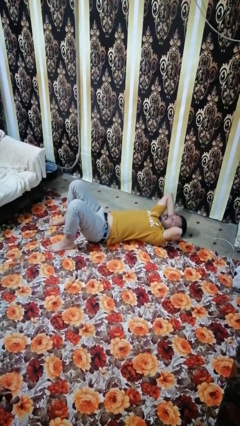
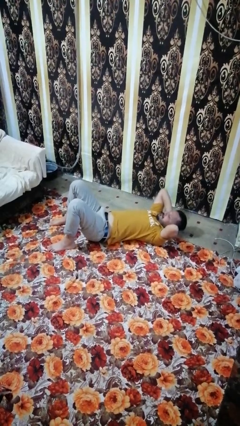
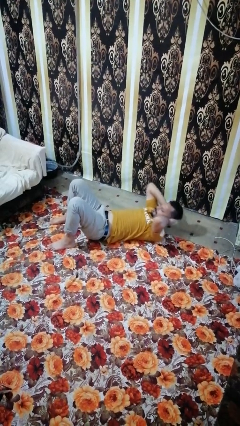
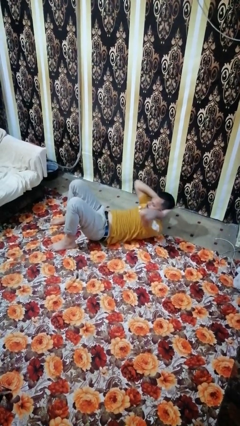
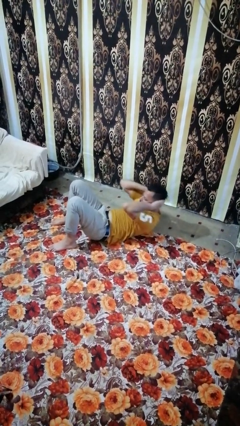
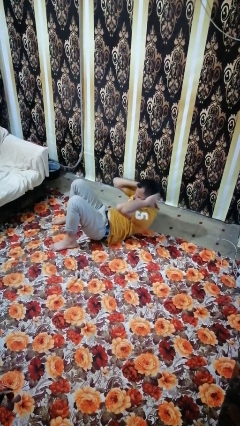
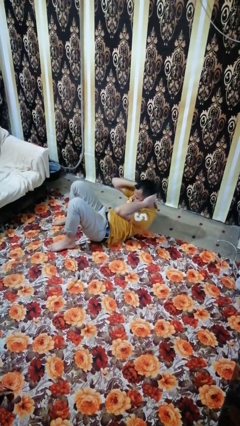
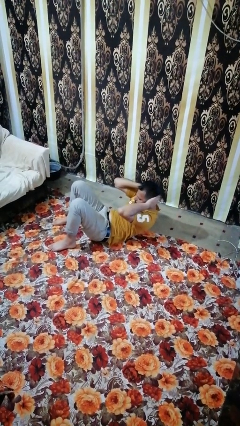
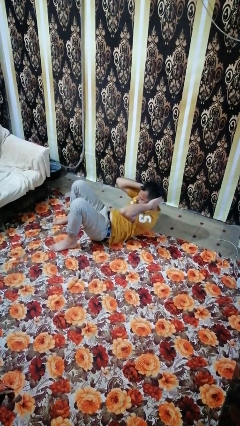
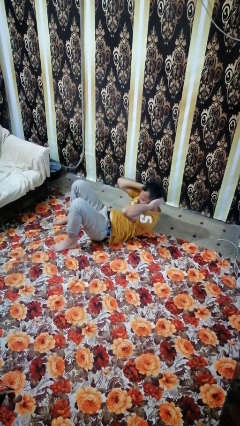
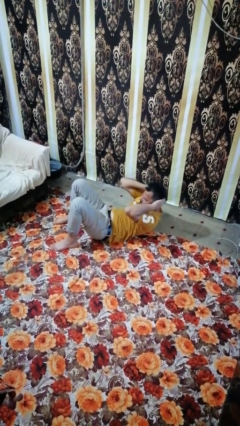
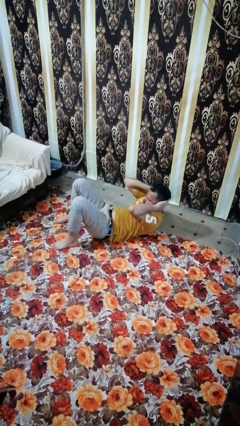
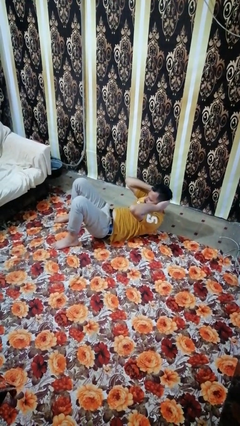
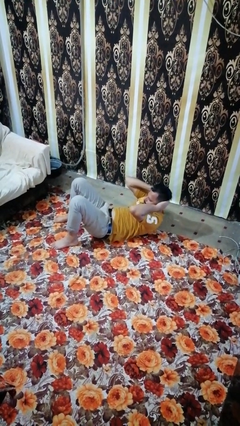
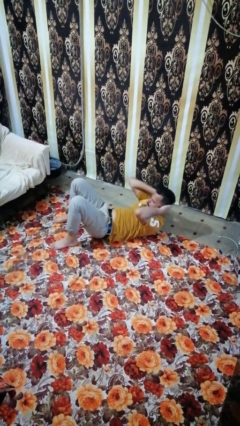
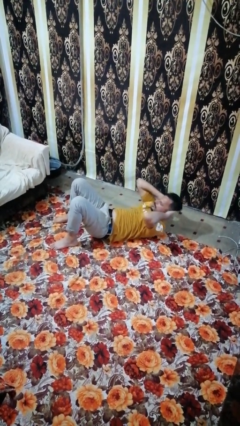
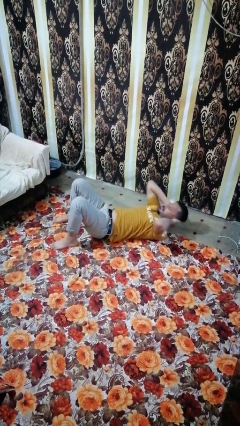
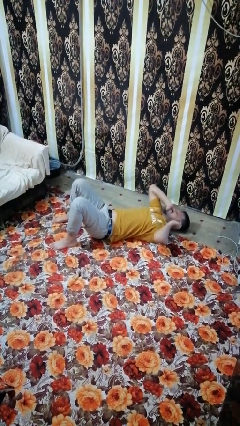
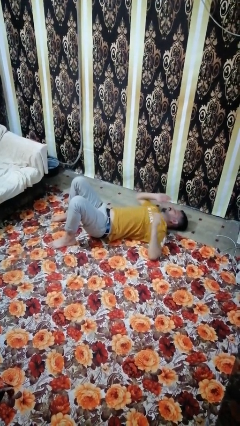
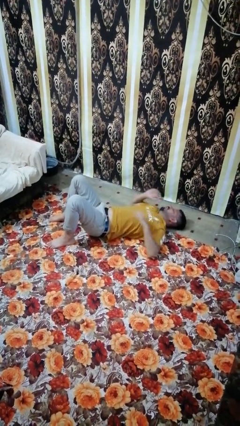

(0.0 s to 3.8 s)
person exercises with situp

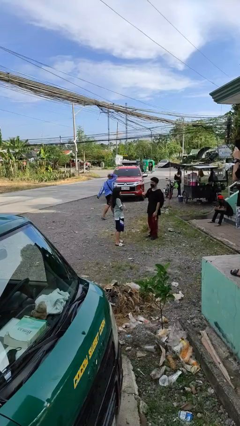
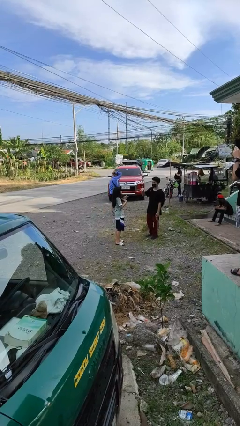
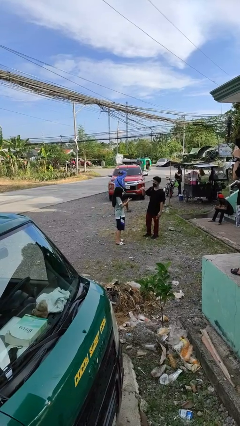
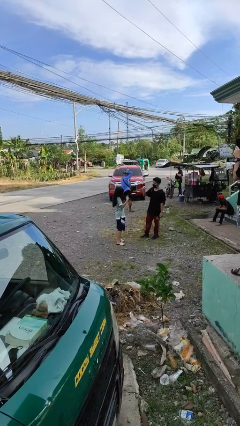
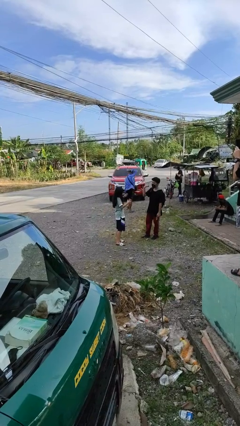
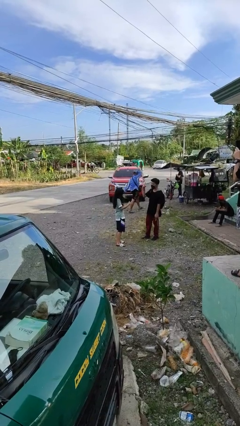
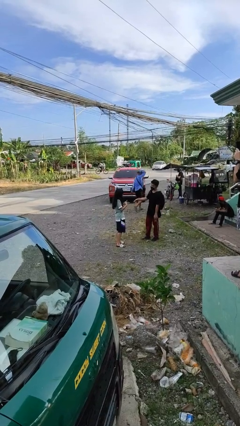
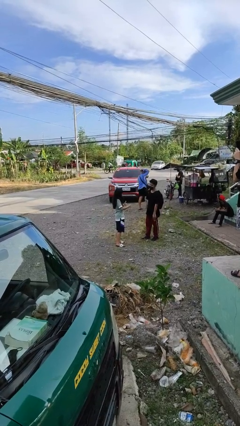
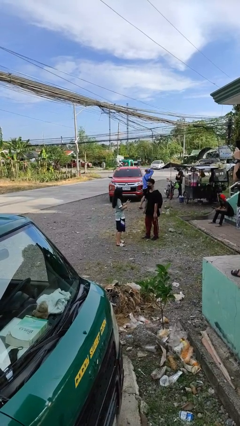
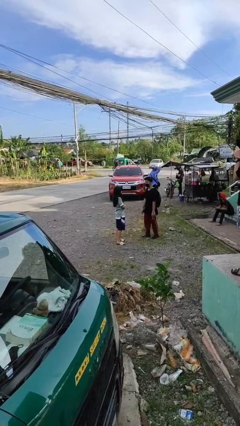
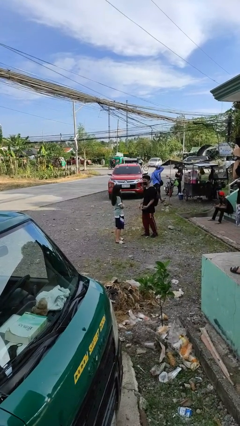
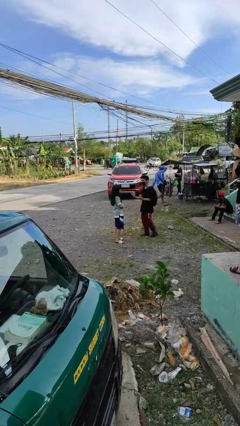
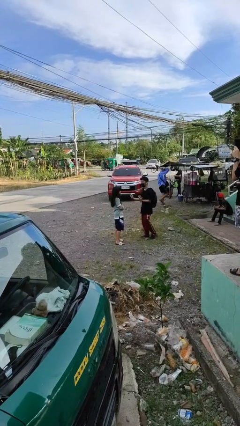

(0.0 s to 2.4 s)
person talks to person

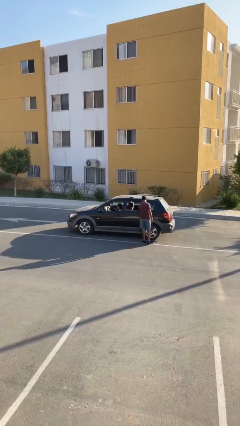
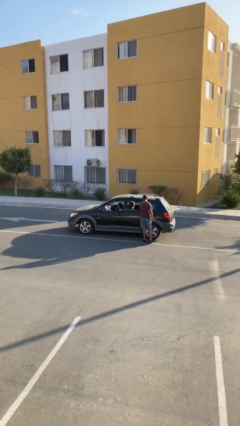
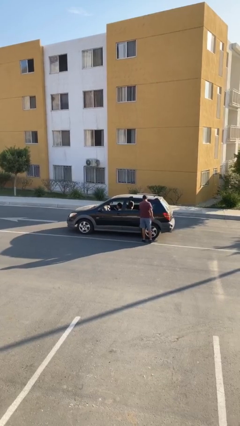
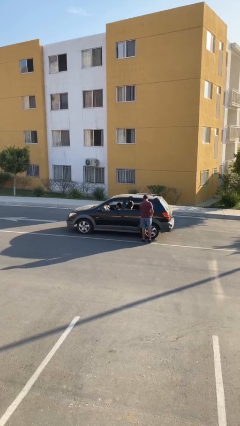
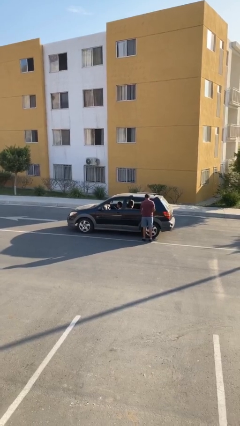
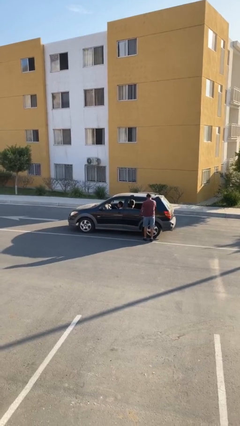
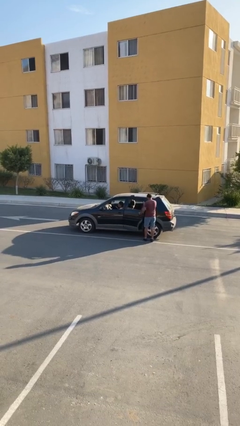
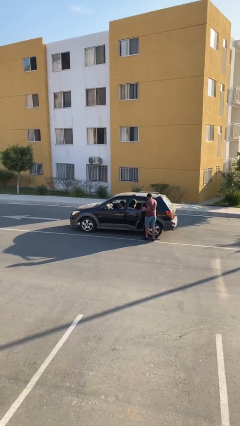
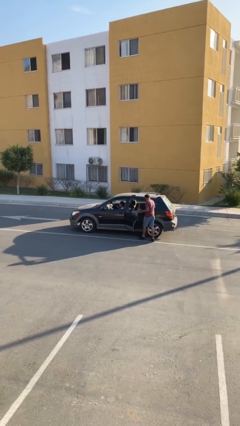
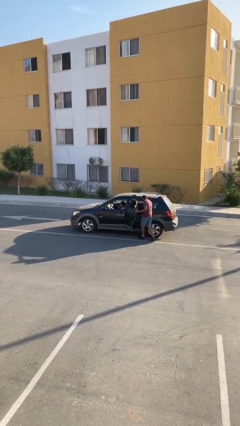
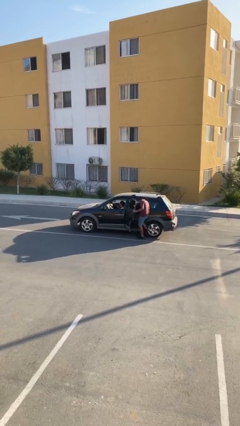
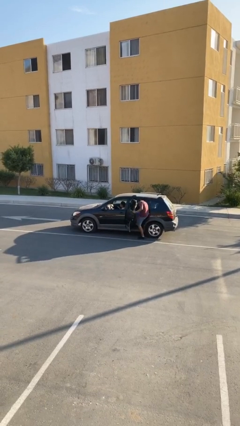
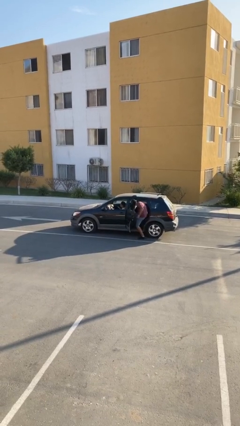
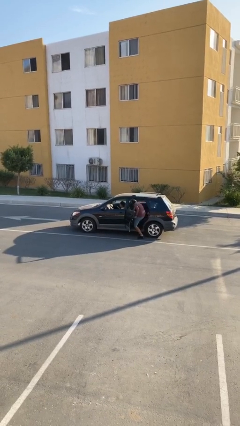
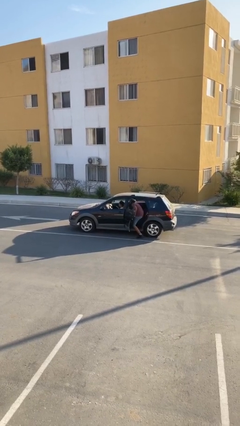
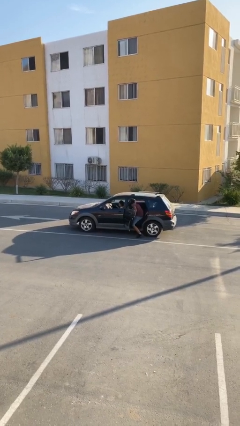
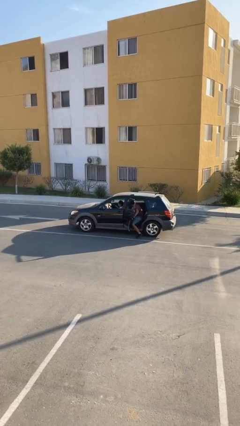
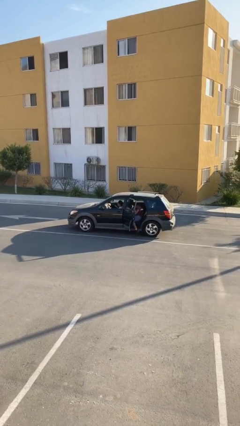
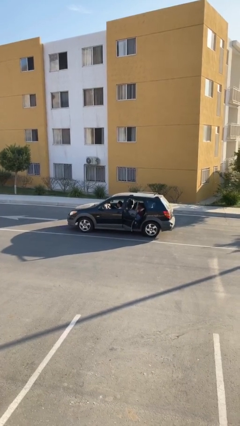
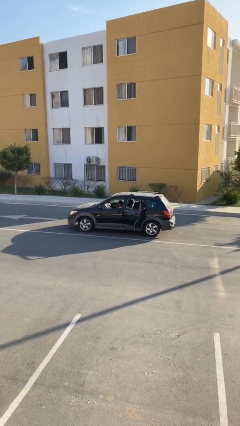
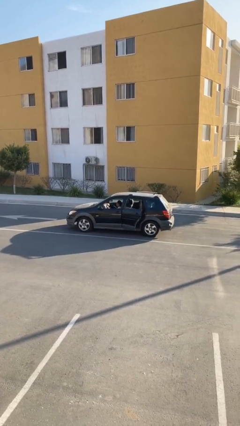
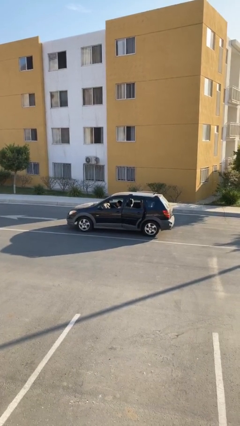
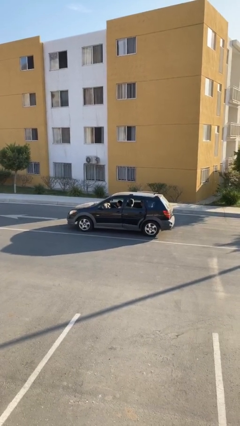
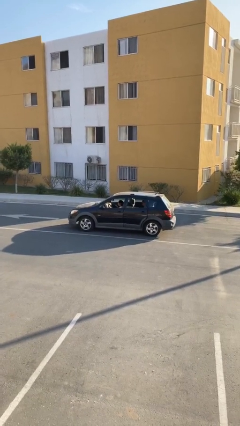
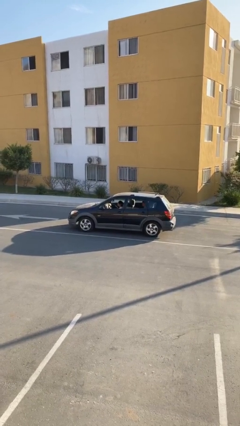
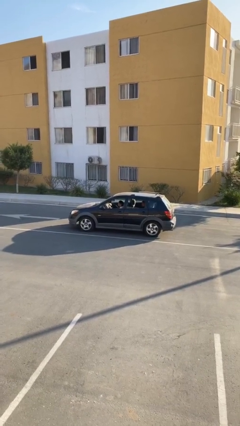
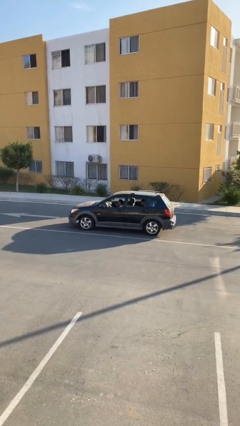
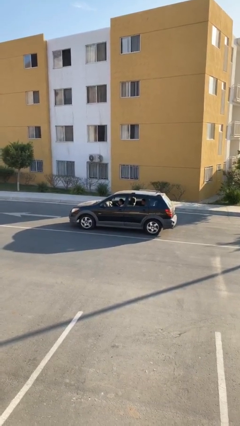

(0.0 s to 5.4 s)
car picks up person

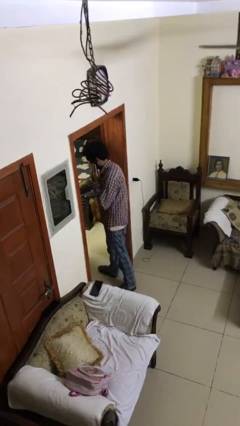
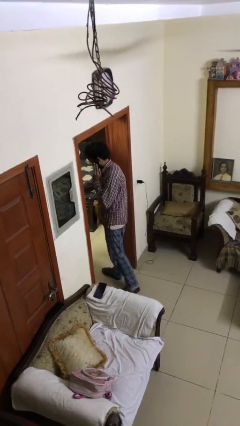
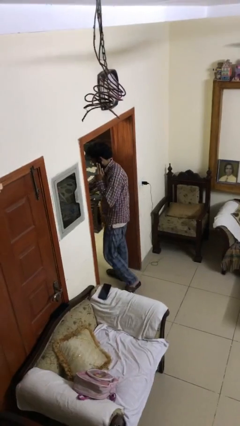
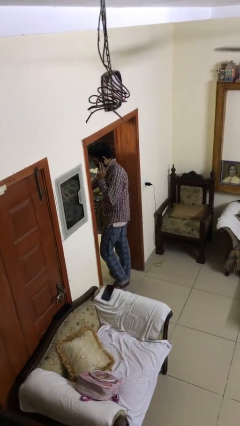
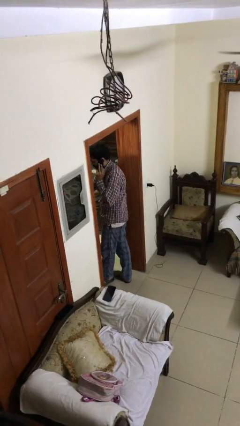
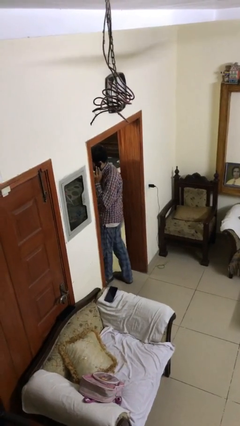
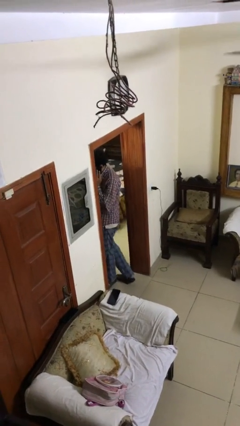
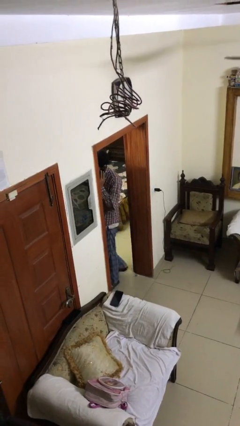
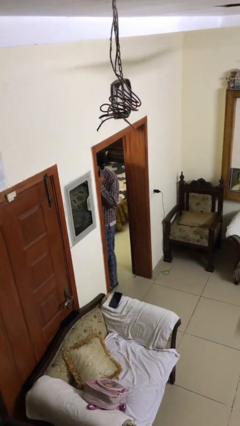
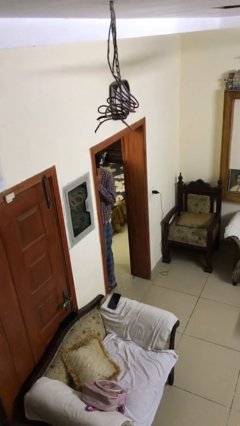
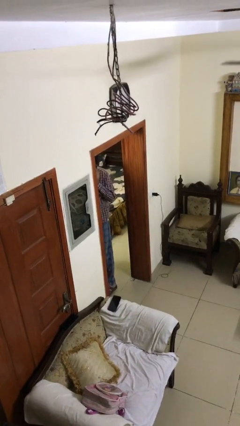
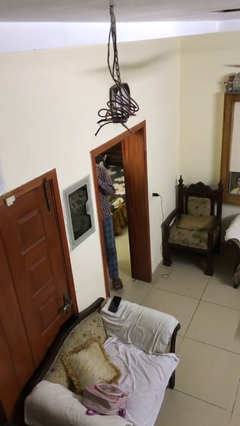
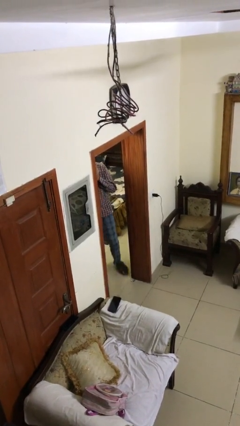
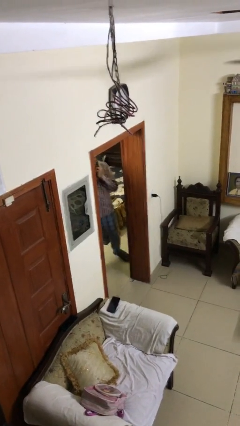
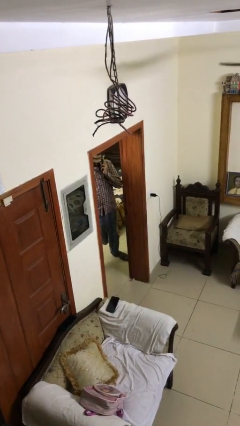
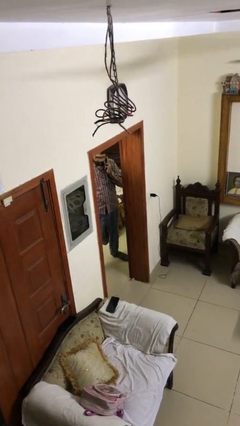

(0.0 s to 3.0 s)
person exits scene through structure

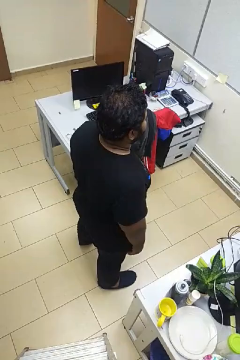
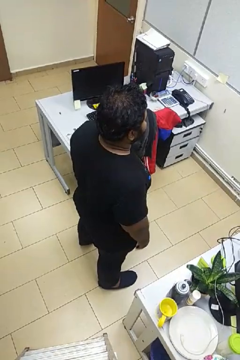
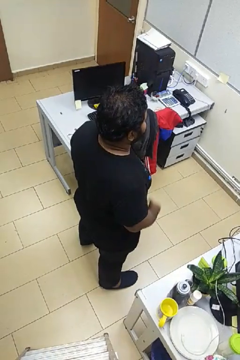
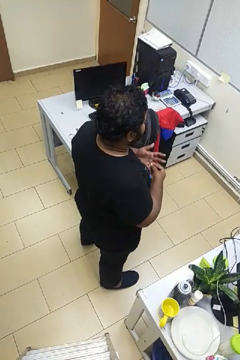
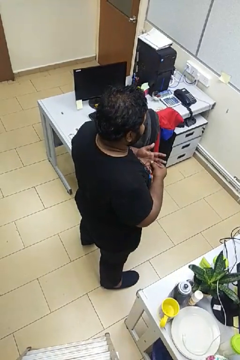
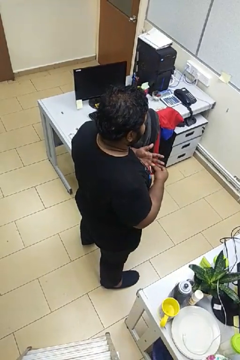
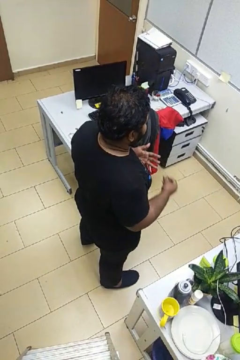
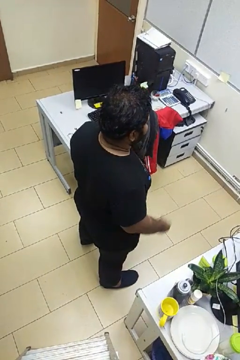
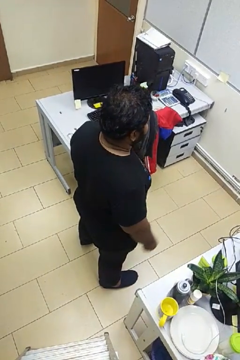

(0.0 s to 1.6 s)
person takes off ring

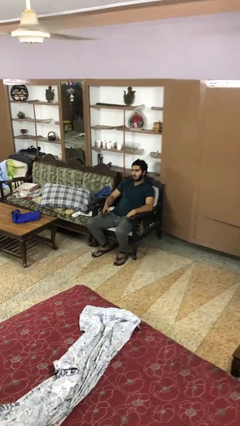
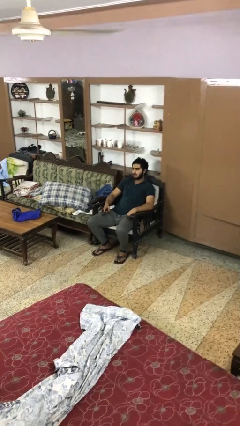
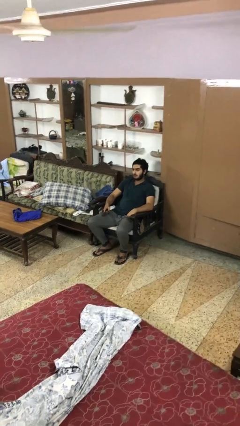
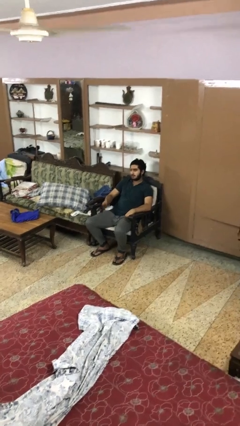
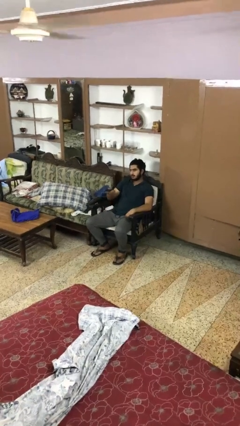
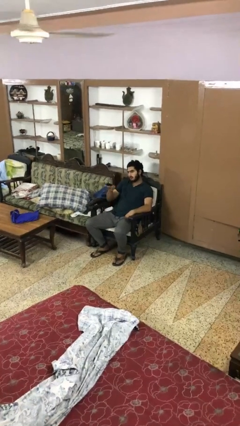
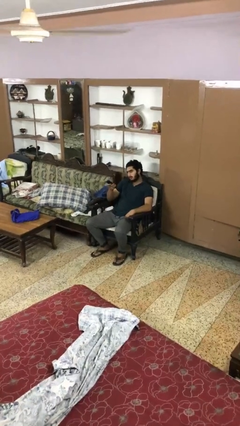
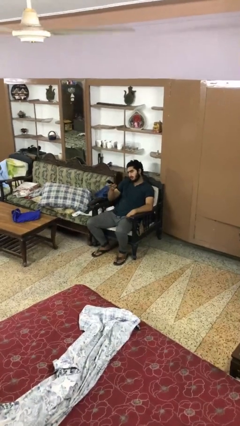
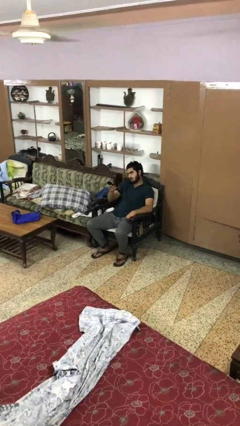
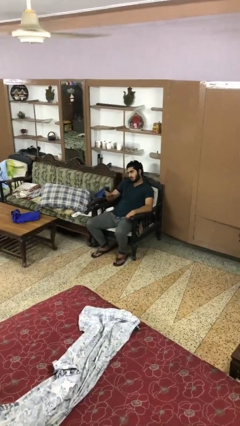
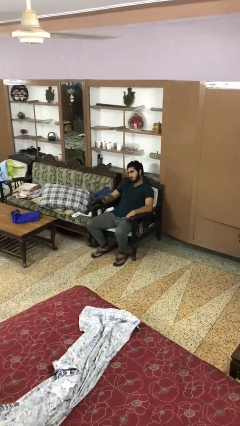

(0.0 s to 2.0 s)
person uses television remote
